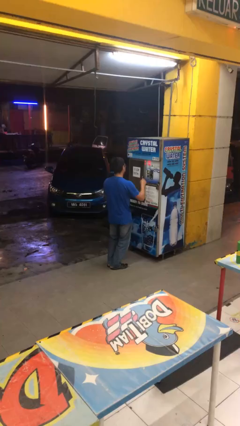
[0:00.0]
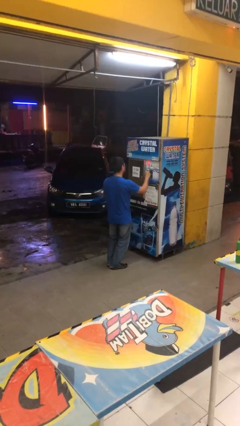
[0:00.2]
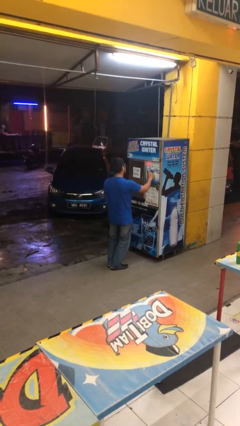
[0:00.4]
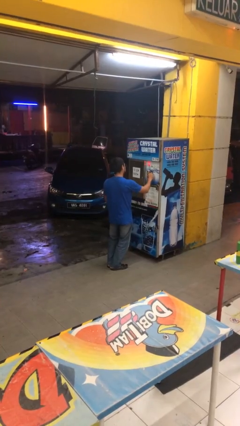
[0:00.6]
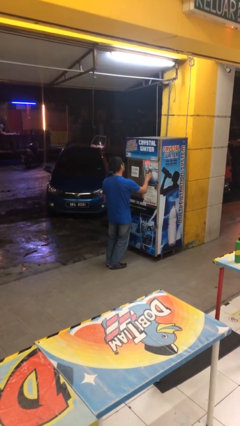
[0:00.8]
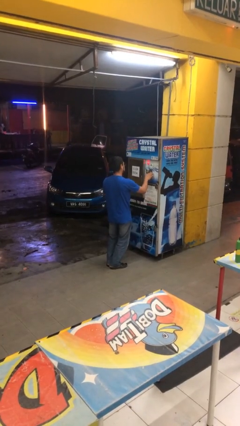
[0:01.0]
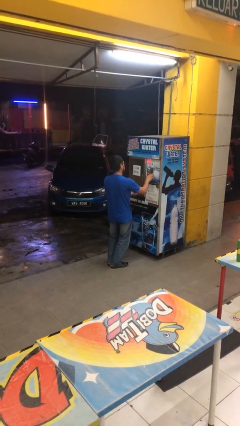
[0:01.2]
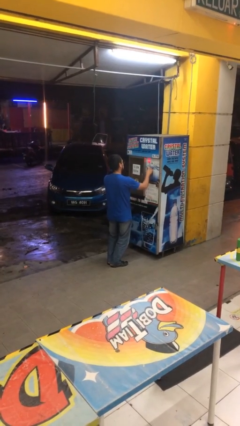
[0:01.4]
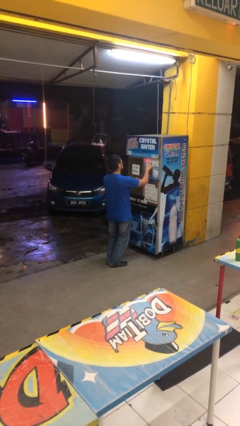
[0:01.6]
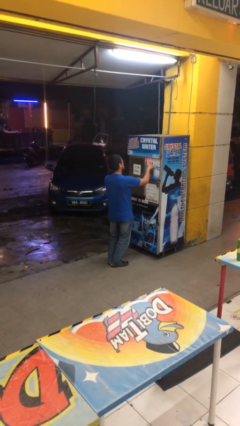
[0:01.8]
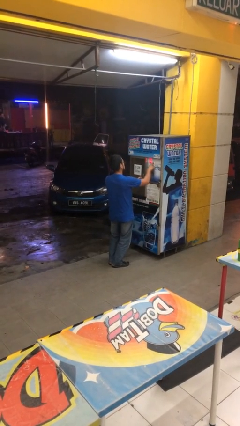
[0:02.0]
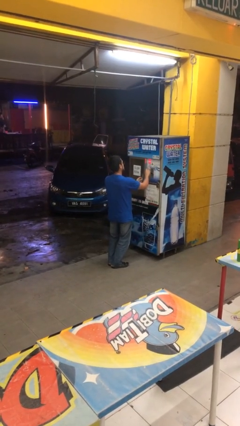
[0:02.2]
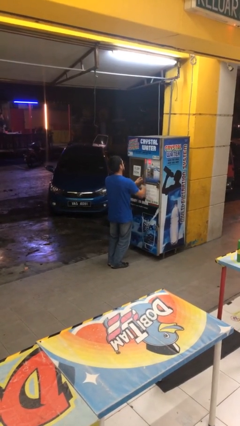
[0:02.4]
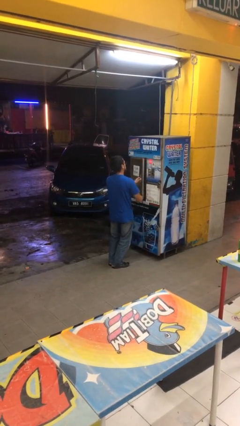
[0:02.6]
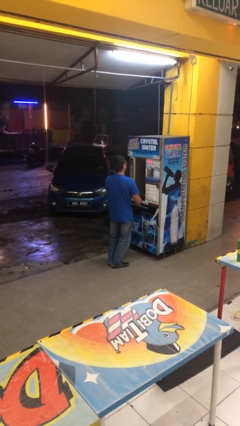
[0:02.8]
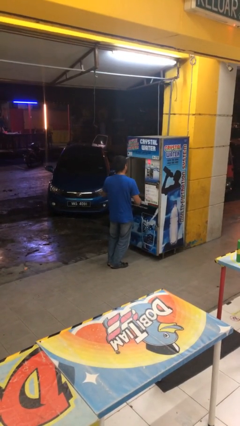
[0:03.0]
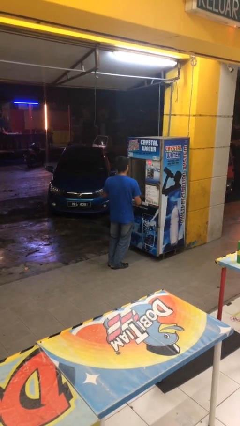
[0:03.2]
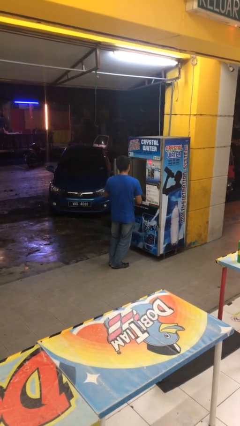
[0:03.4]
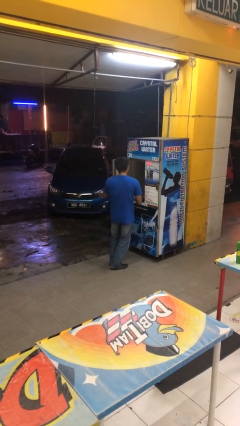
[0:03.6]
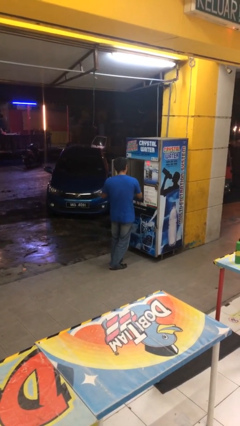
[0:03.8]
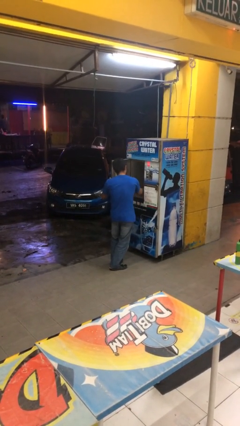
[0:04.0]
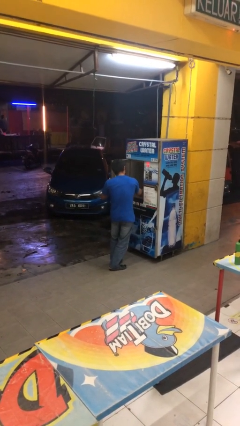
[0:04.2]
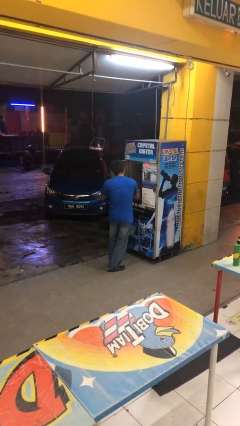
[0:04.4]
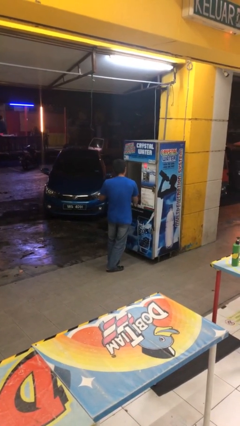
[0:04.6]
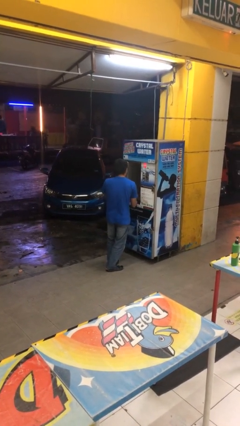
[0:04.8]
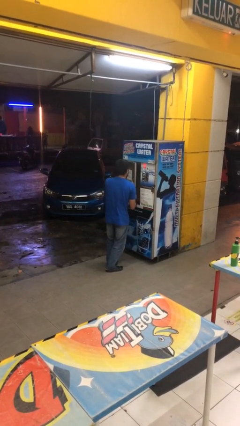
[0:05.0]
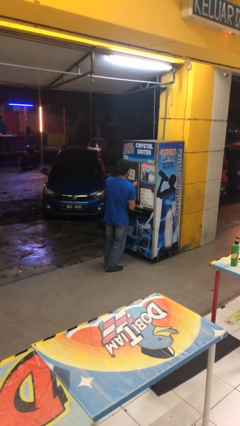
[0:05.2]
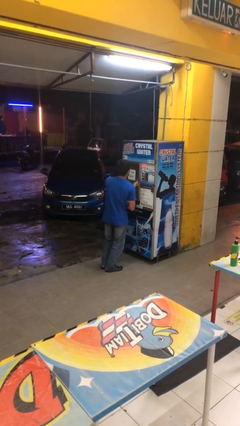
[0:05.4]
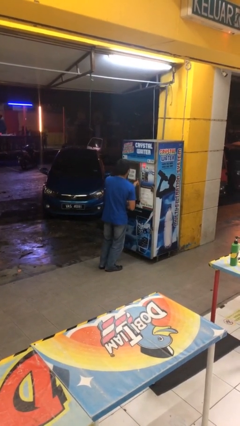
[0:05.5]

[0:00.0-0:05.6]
person purchases from machine

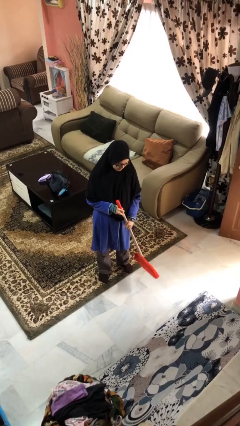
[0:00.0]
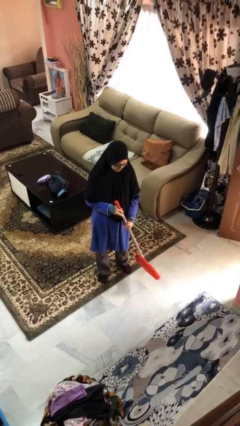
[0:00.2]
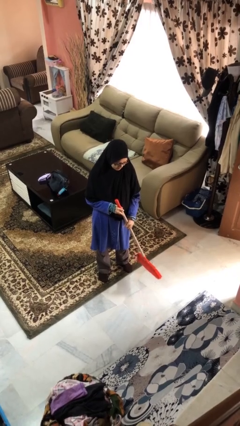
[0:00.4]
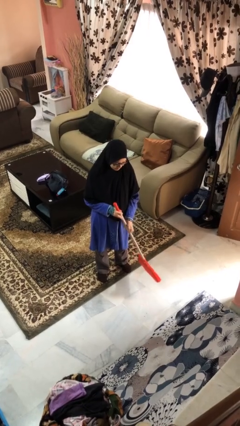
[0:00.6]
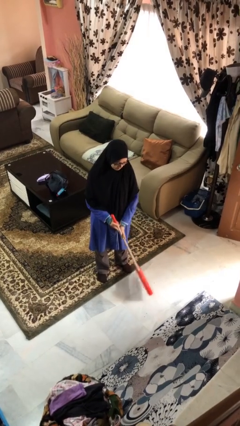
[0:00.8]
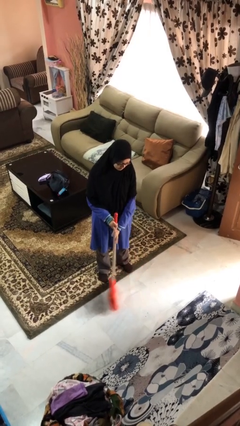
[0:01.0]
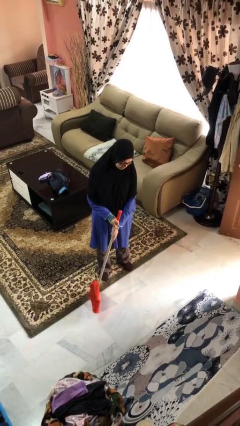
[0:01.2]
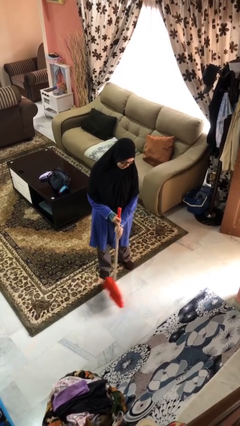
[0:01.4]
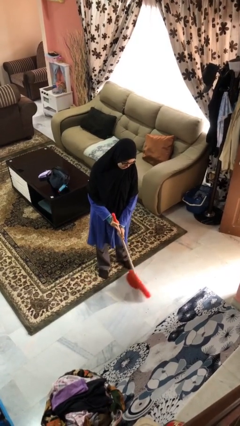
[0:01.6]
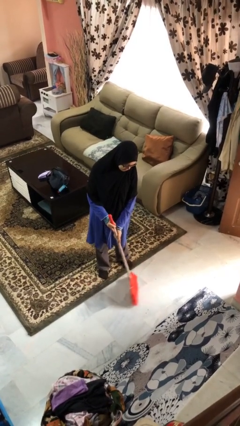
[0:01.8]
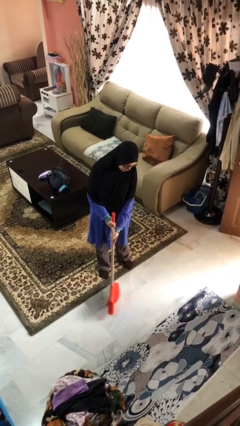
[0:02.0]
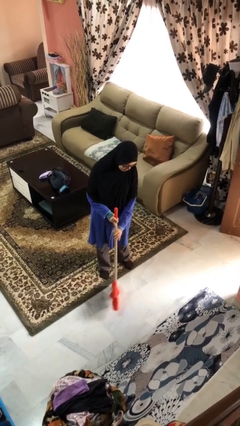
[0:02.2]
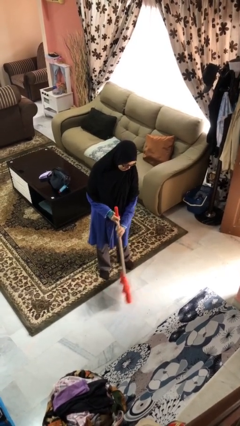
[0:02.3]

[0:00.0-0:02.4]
person sweeps floor

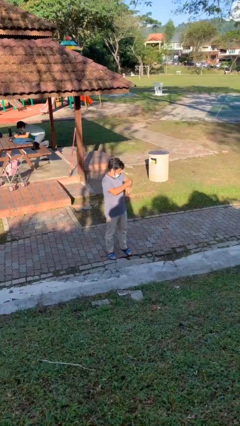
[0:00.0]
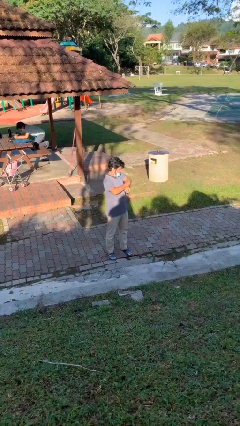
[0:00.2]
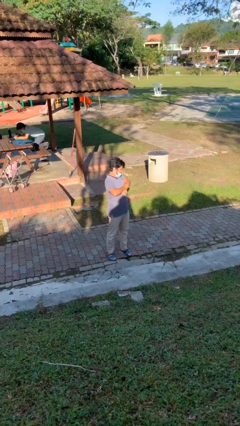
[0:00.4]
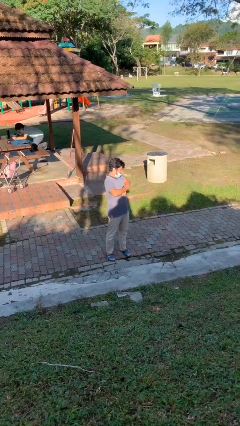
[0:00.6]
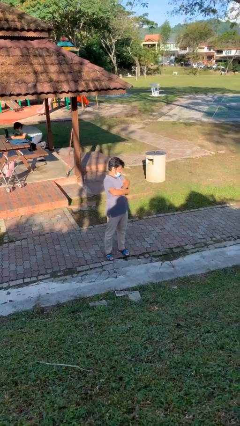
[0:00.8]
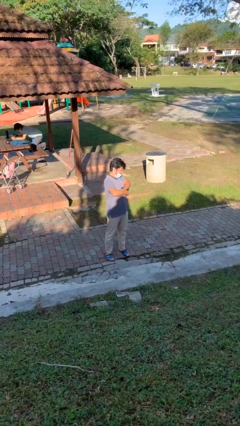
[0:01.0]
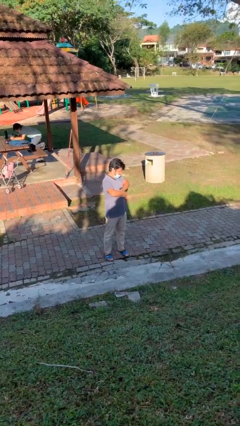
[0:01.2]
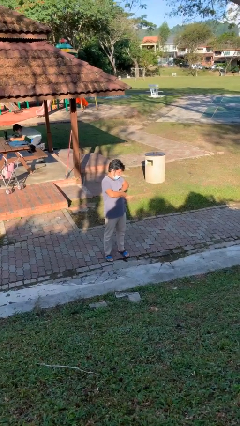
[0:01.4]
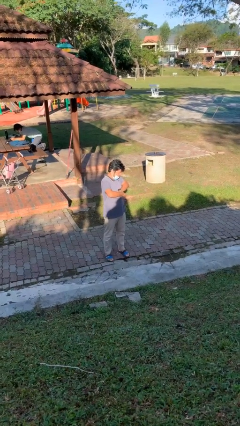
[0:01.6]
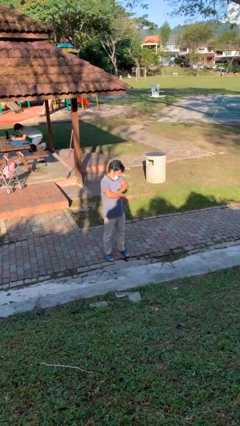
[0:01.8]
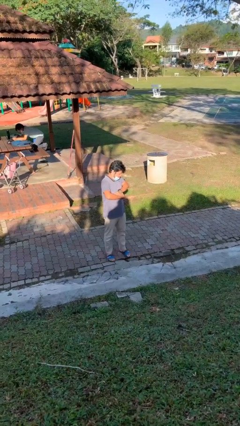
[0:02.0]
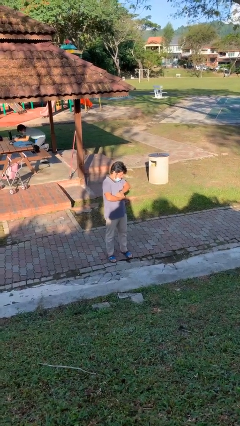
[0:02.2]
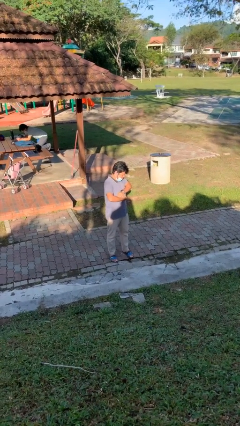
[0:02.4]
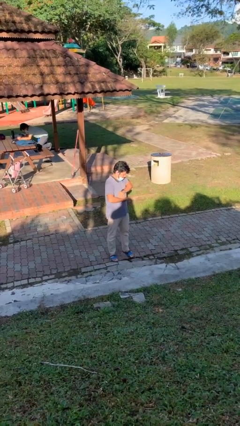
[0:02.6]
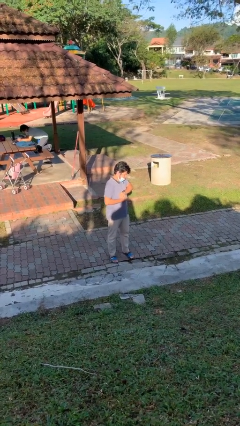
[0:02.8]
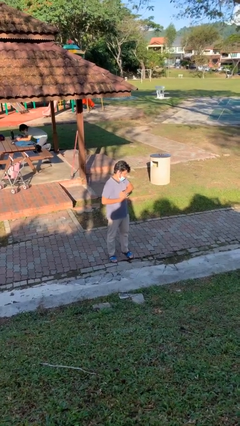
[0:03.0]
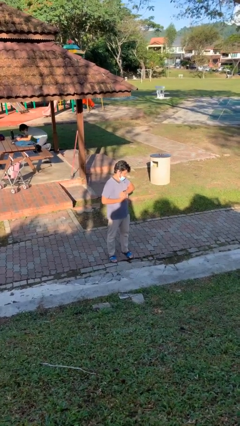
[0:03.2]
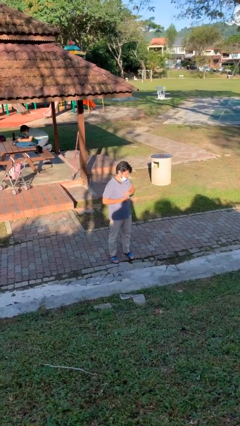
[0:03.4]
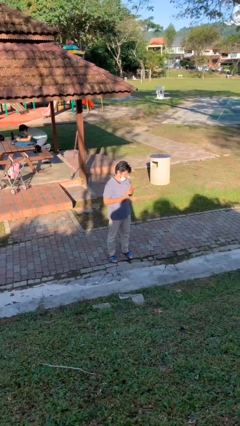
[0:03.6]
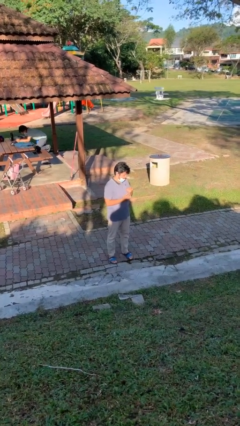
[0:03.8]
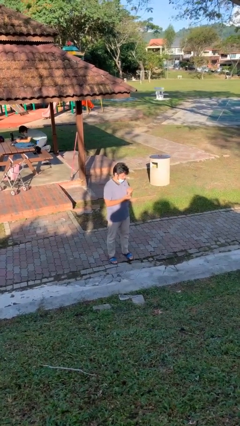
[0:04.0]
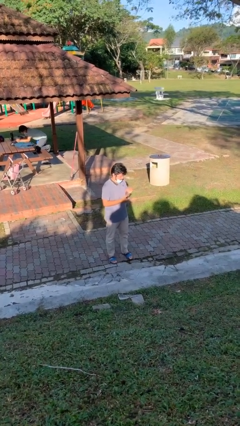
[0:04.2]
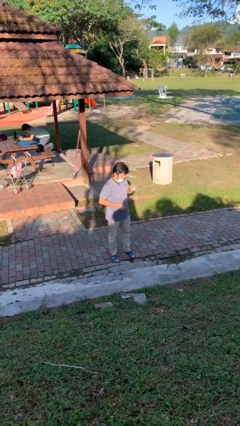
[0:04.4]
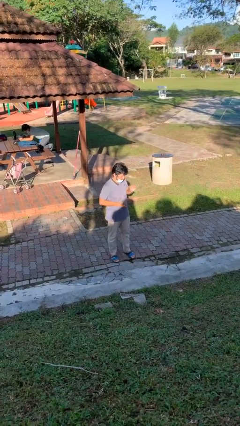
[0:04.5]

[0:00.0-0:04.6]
person puts on wristwatch

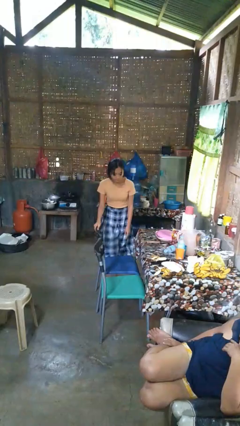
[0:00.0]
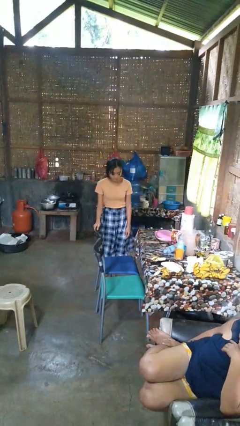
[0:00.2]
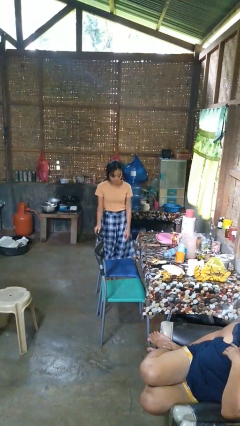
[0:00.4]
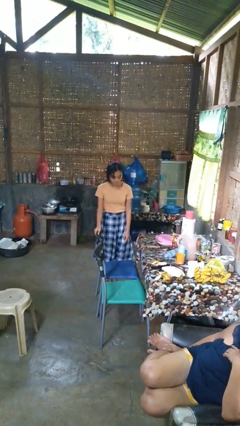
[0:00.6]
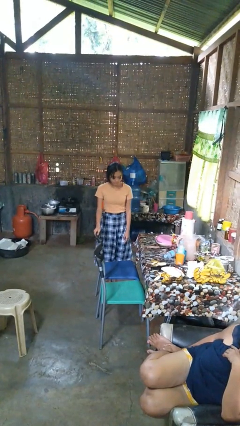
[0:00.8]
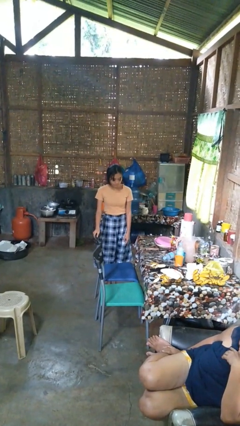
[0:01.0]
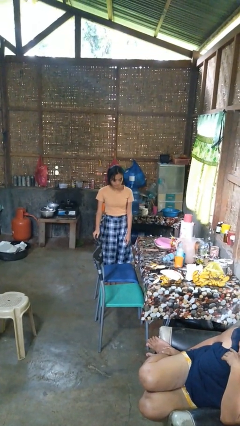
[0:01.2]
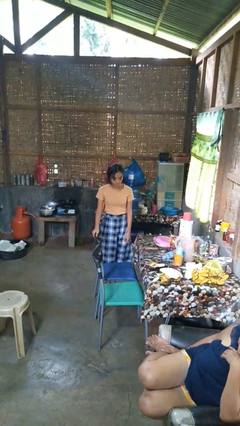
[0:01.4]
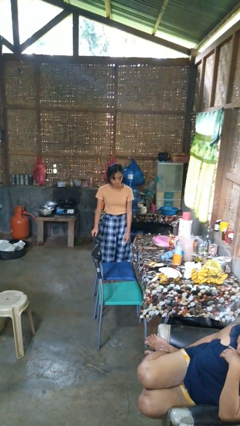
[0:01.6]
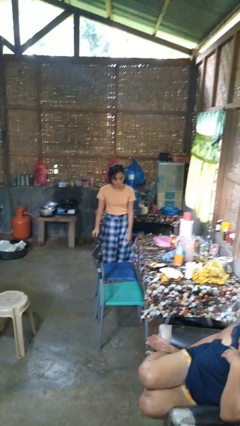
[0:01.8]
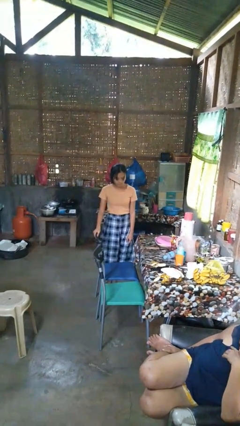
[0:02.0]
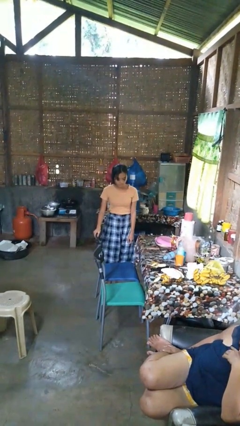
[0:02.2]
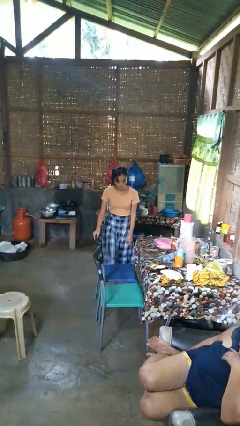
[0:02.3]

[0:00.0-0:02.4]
person climbs off couch

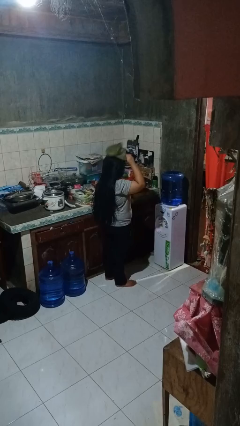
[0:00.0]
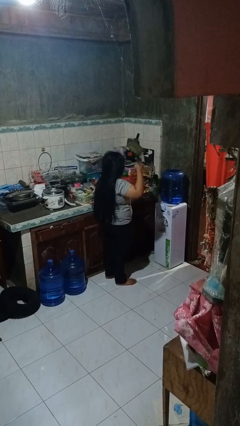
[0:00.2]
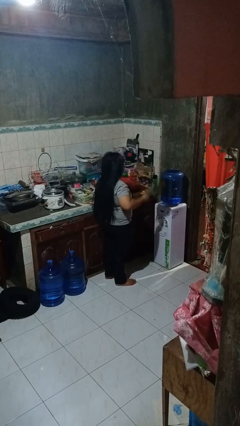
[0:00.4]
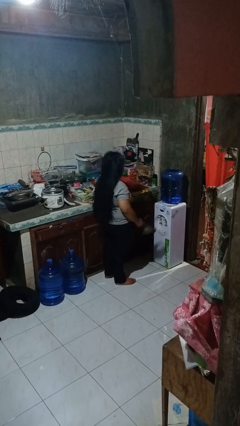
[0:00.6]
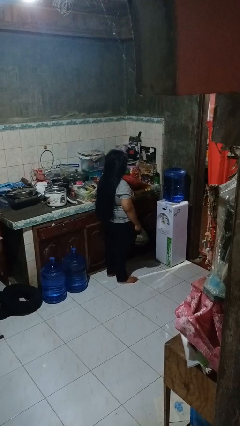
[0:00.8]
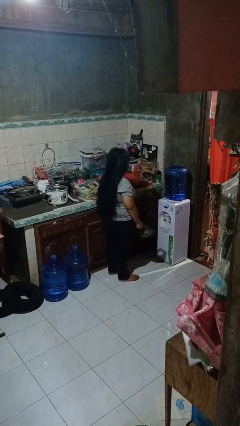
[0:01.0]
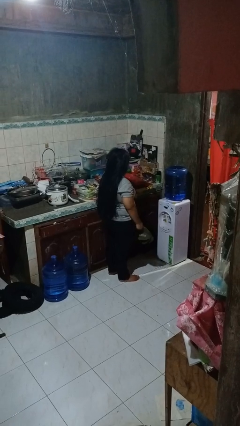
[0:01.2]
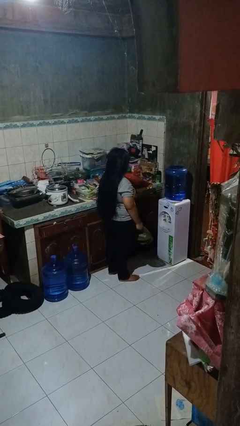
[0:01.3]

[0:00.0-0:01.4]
person takes off hat

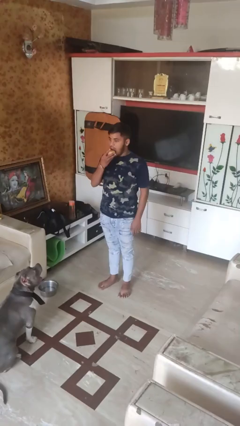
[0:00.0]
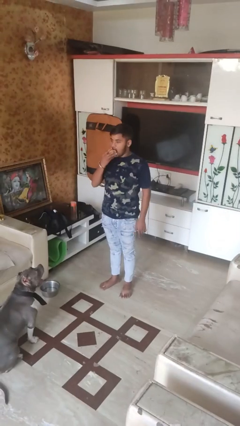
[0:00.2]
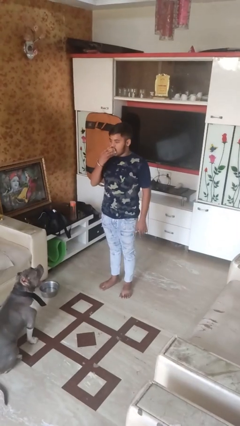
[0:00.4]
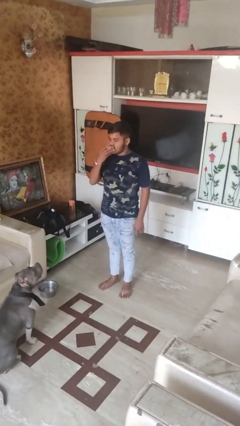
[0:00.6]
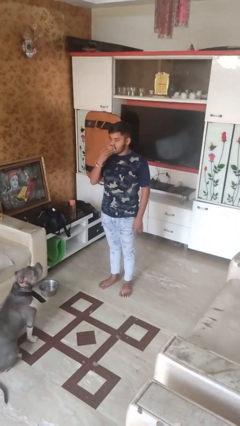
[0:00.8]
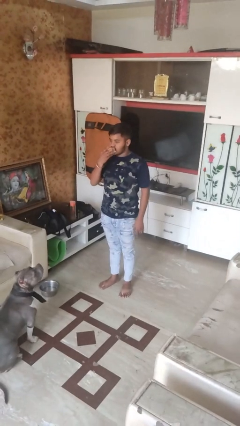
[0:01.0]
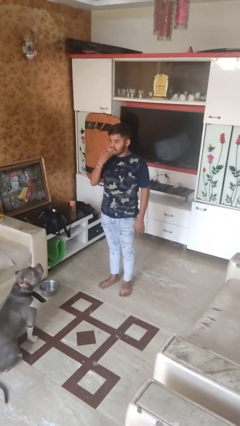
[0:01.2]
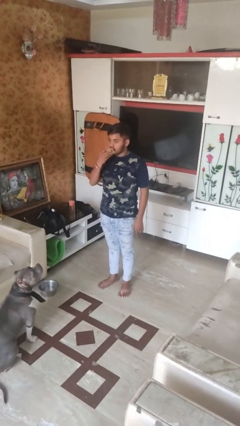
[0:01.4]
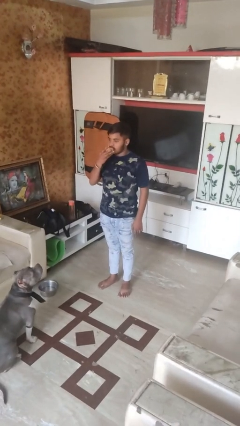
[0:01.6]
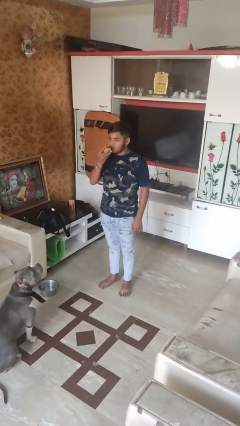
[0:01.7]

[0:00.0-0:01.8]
person eats apple
